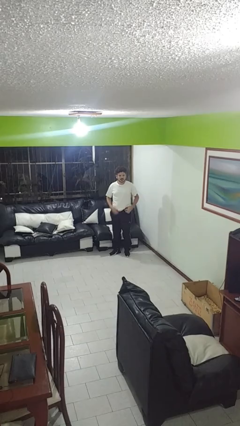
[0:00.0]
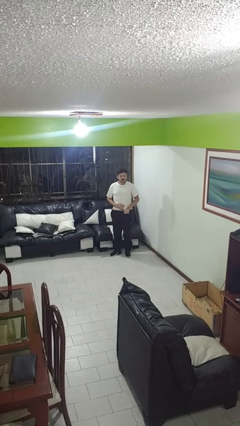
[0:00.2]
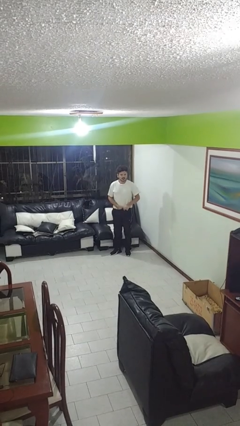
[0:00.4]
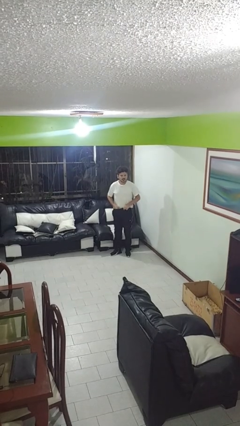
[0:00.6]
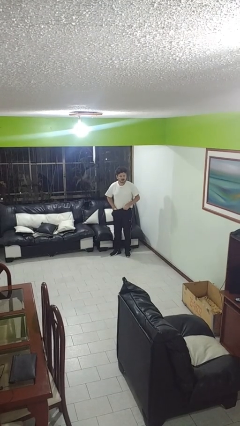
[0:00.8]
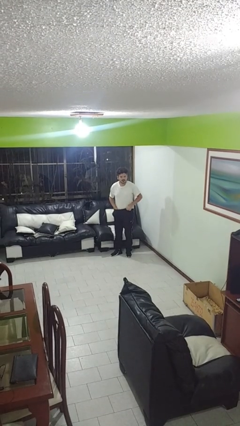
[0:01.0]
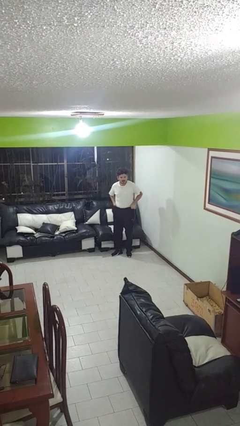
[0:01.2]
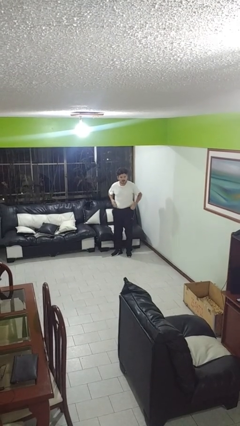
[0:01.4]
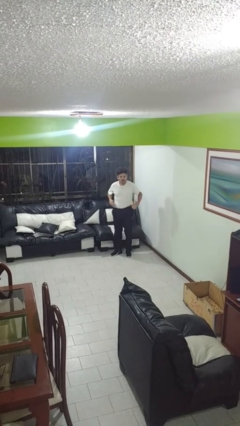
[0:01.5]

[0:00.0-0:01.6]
person tucks in shirt

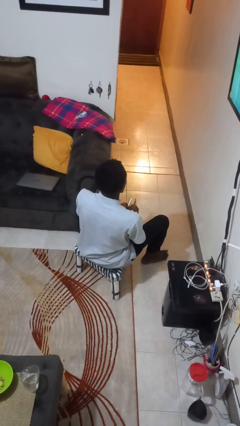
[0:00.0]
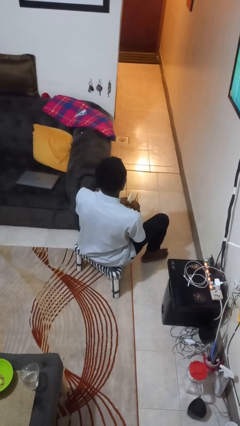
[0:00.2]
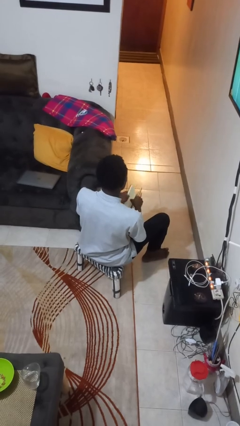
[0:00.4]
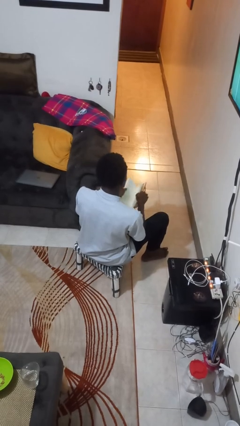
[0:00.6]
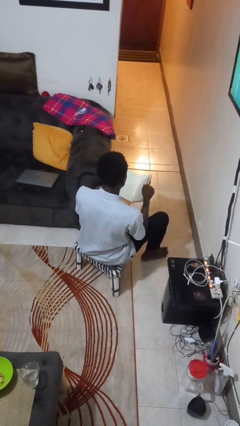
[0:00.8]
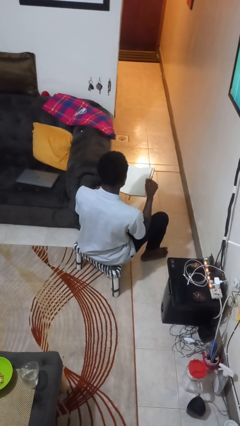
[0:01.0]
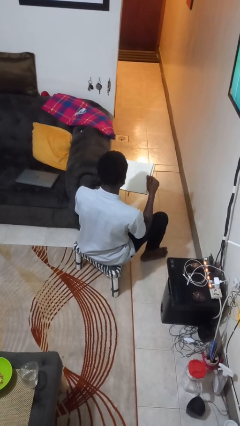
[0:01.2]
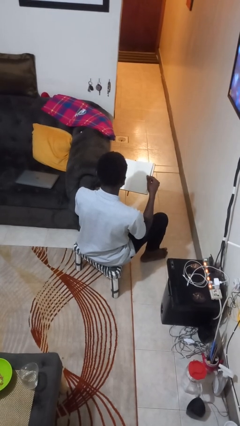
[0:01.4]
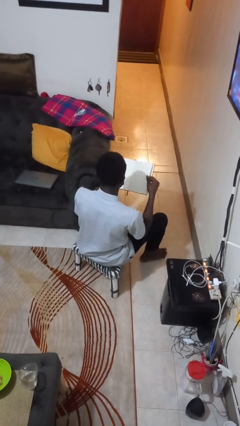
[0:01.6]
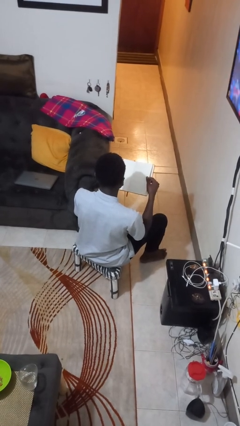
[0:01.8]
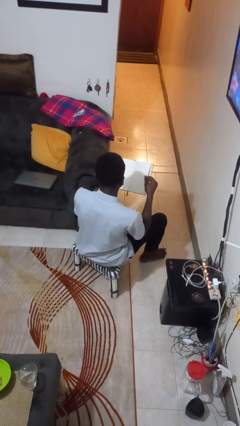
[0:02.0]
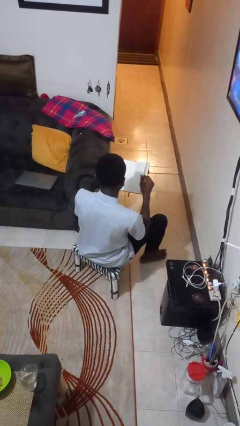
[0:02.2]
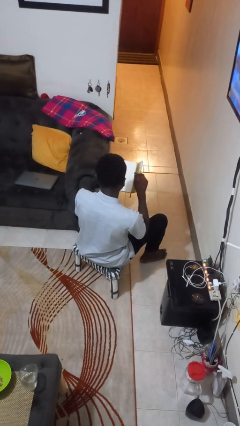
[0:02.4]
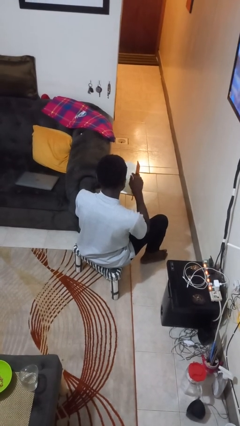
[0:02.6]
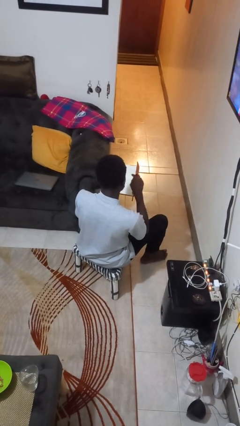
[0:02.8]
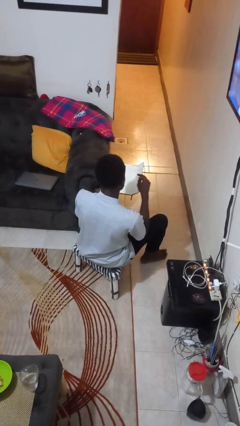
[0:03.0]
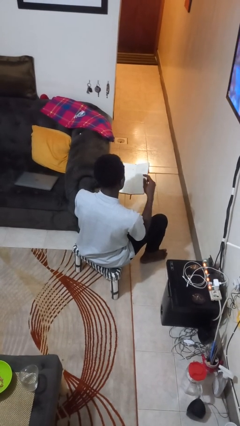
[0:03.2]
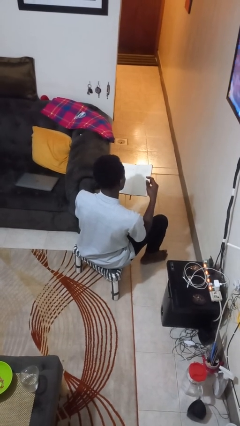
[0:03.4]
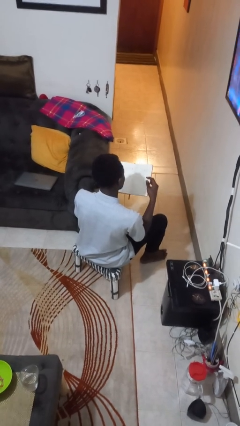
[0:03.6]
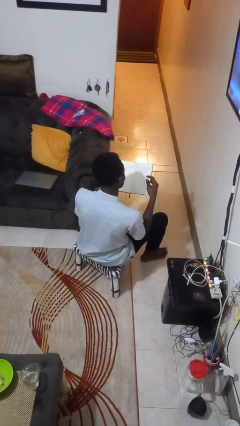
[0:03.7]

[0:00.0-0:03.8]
person reads book

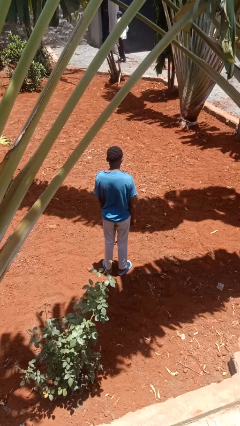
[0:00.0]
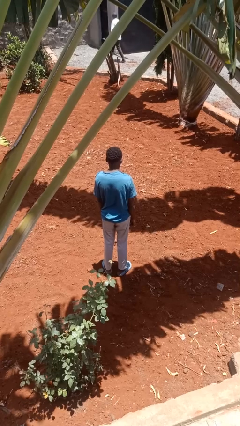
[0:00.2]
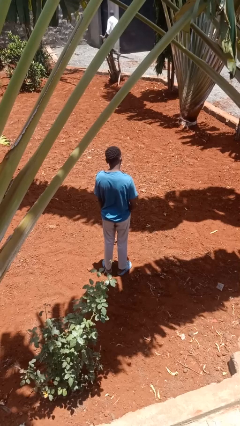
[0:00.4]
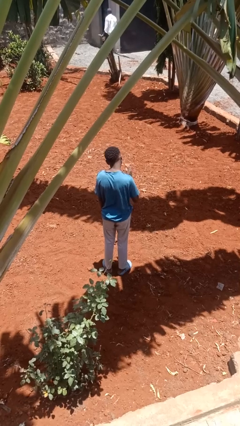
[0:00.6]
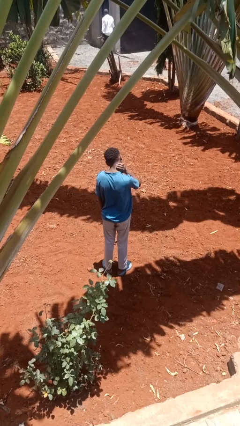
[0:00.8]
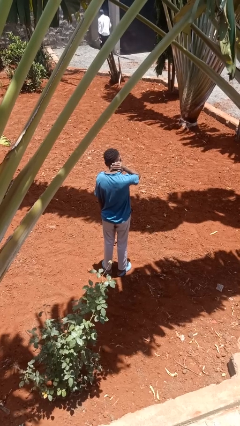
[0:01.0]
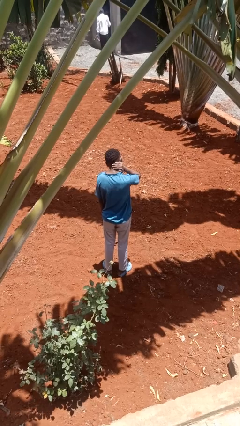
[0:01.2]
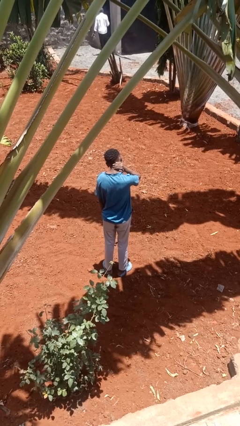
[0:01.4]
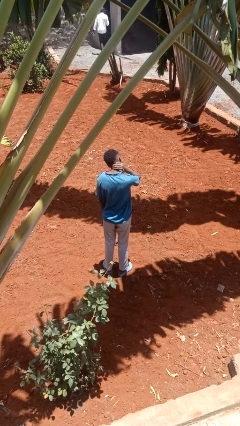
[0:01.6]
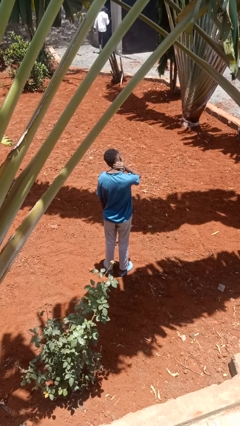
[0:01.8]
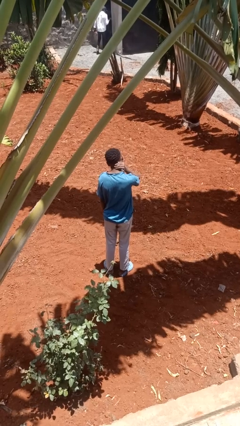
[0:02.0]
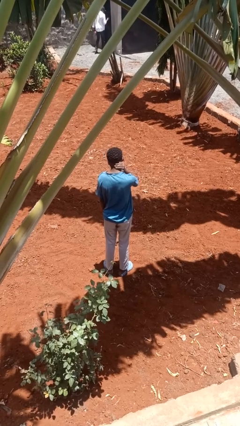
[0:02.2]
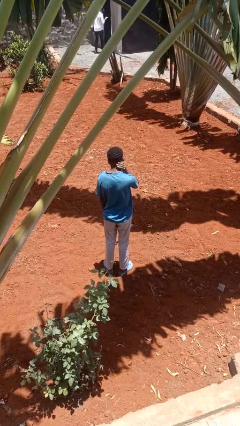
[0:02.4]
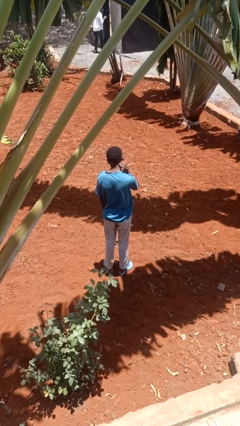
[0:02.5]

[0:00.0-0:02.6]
person rubs neck

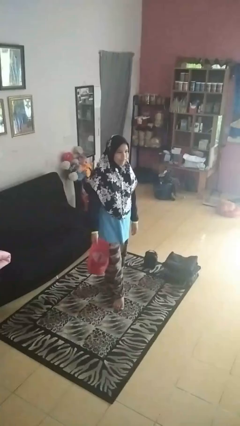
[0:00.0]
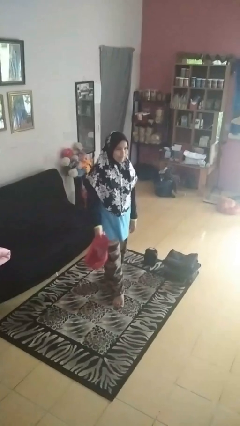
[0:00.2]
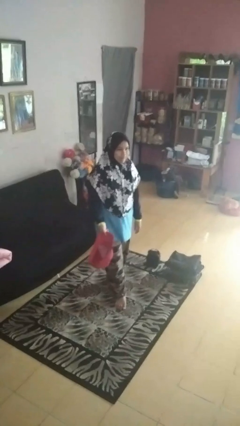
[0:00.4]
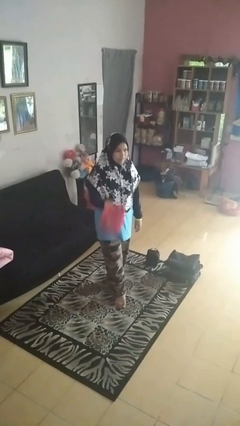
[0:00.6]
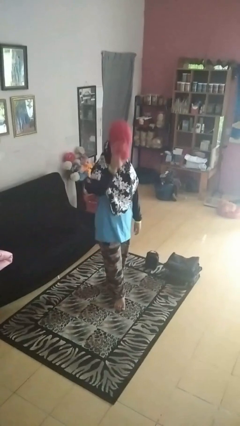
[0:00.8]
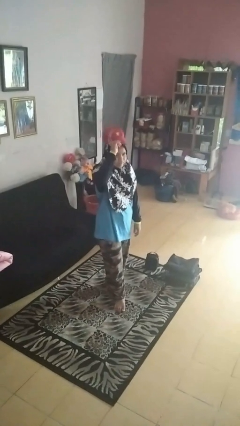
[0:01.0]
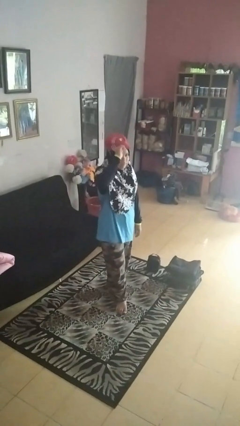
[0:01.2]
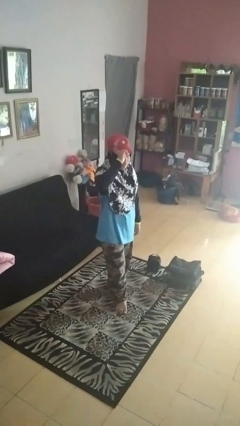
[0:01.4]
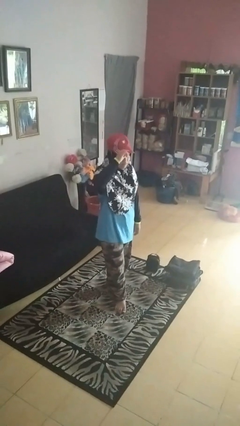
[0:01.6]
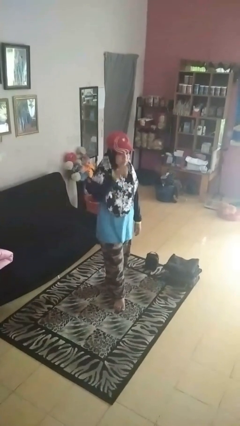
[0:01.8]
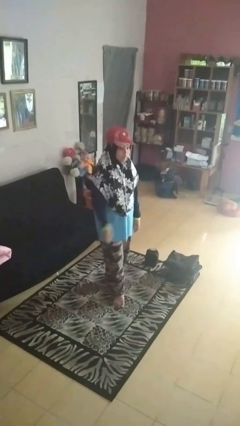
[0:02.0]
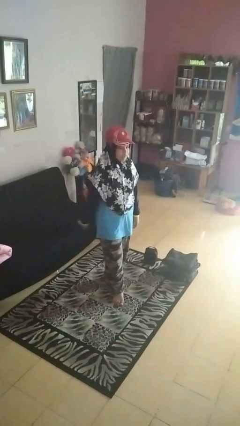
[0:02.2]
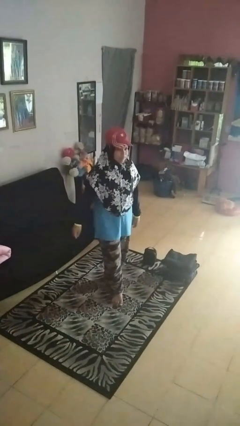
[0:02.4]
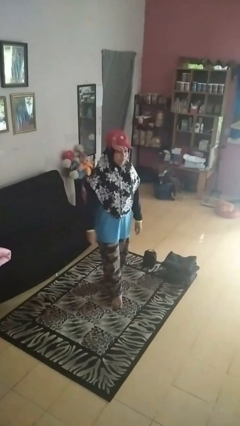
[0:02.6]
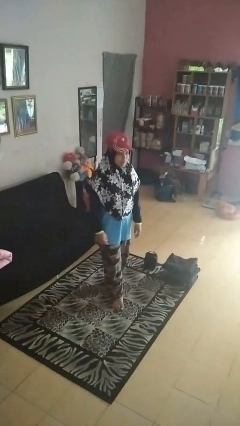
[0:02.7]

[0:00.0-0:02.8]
person puts on hat

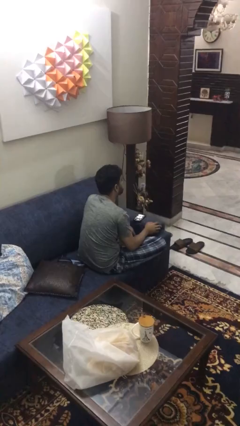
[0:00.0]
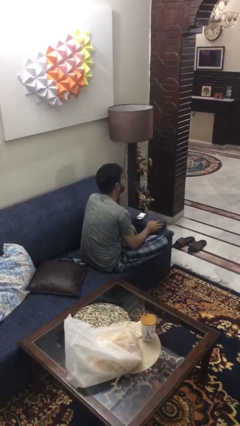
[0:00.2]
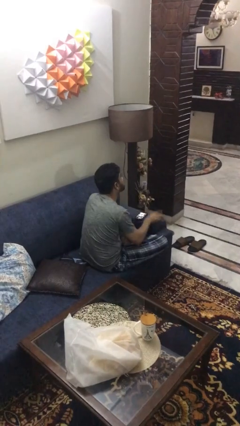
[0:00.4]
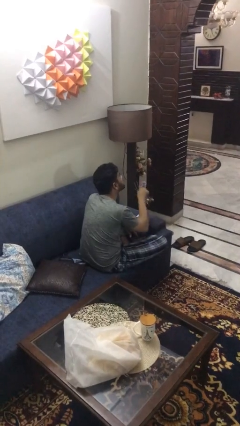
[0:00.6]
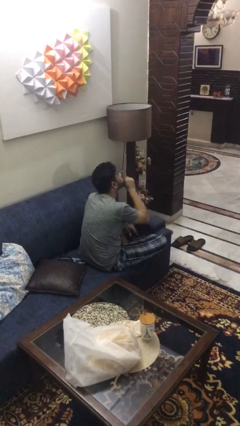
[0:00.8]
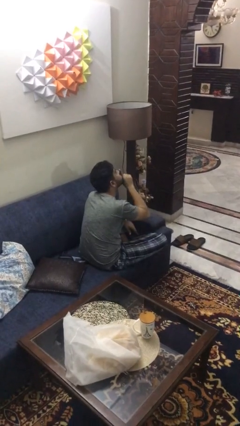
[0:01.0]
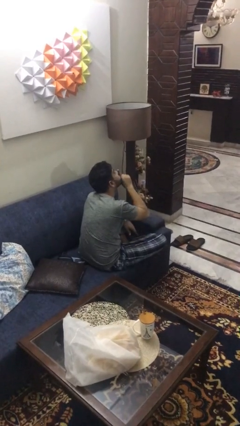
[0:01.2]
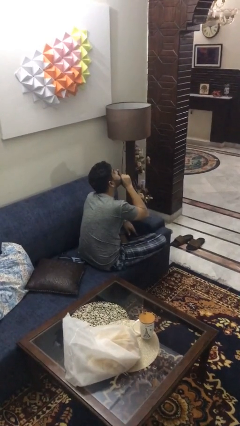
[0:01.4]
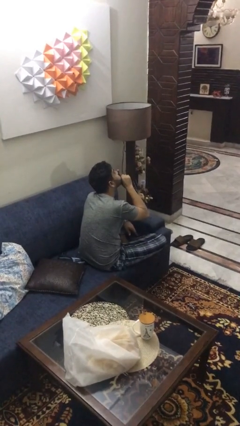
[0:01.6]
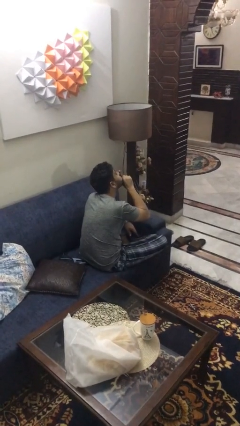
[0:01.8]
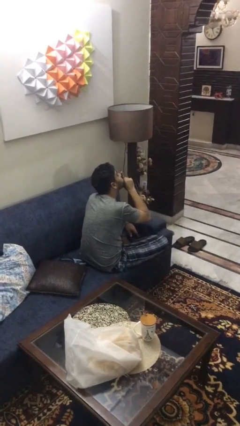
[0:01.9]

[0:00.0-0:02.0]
person gestures be quiet

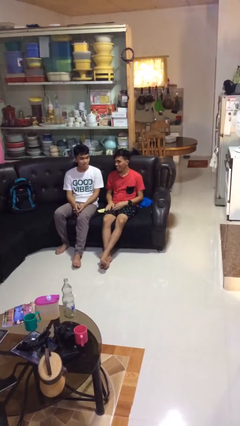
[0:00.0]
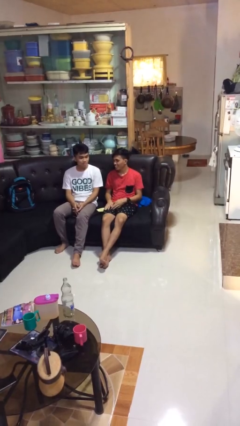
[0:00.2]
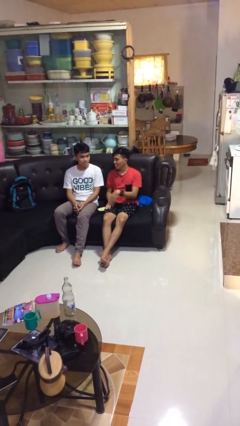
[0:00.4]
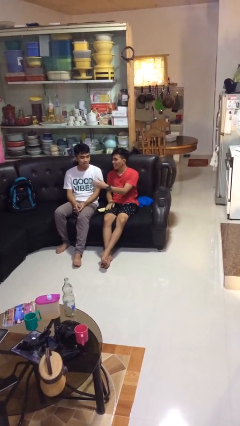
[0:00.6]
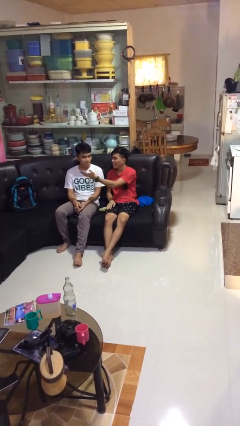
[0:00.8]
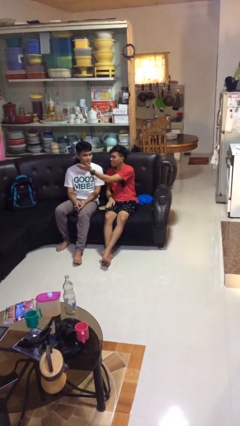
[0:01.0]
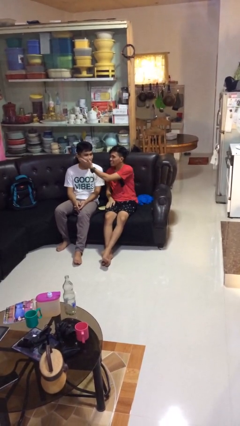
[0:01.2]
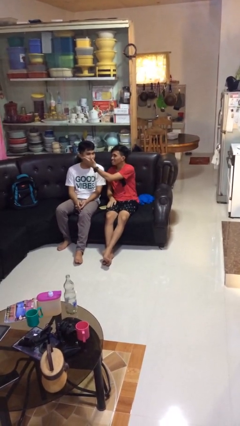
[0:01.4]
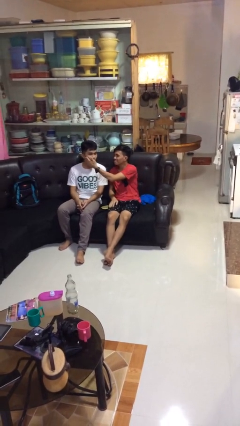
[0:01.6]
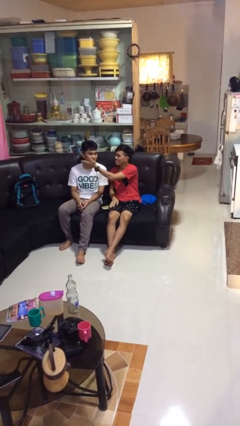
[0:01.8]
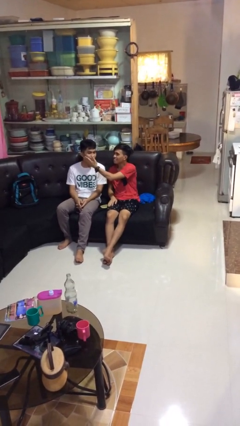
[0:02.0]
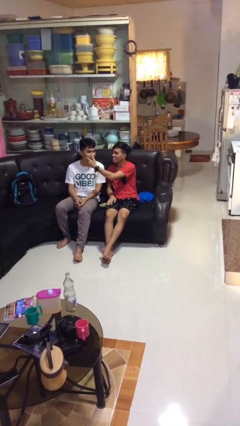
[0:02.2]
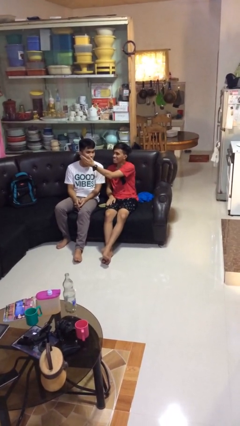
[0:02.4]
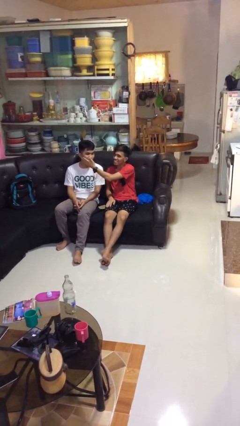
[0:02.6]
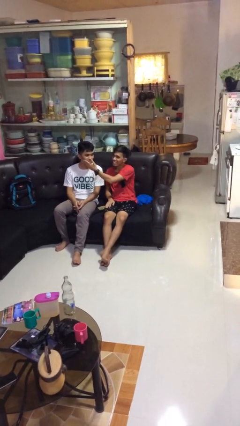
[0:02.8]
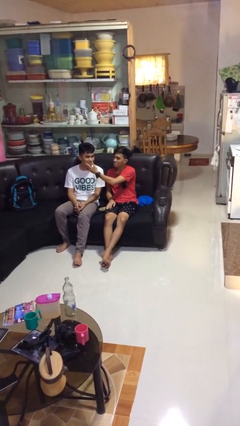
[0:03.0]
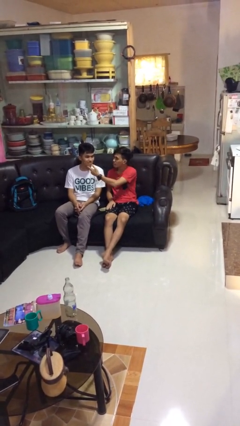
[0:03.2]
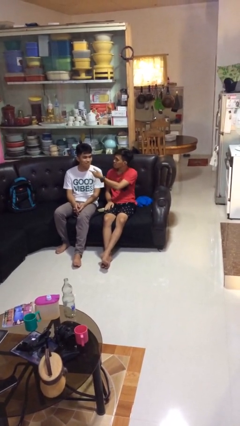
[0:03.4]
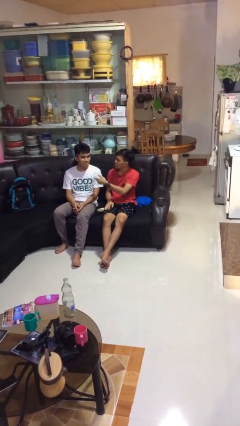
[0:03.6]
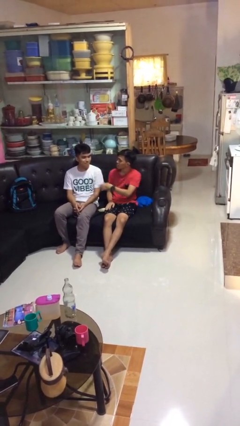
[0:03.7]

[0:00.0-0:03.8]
person touches face of person

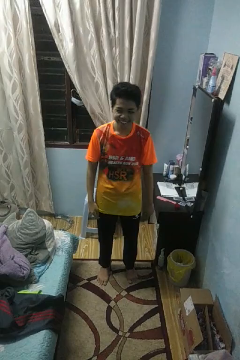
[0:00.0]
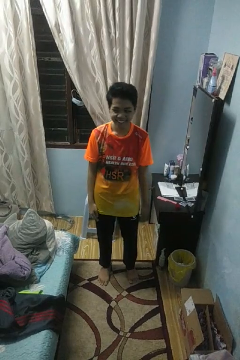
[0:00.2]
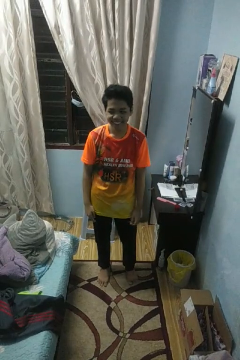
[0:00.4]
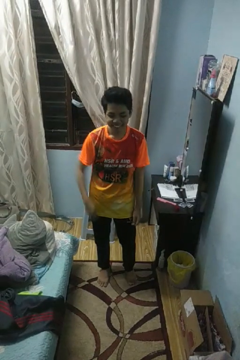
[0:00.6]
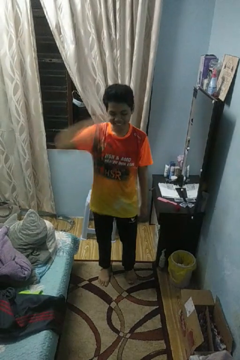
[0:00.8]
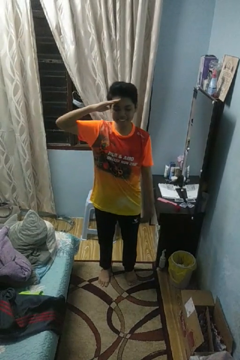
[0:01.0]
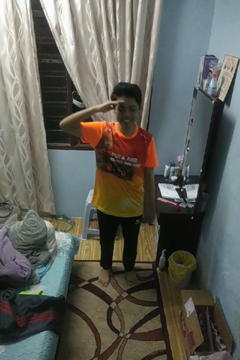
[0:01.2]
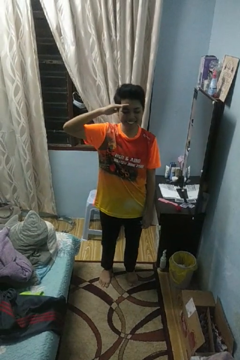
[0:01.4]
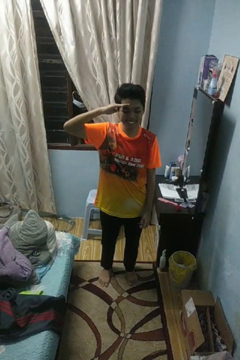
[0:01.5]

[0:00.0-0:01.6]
person salutes
